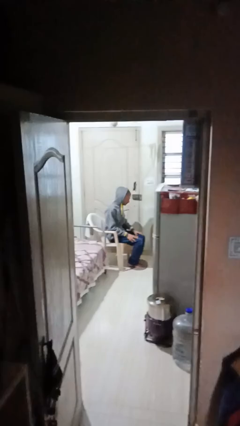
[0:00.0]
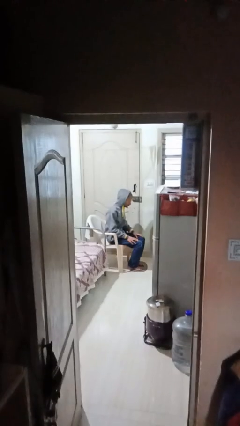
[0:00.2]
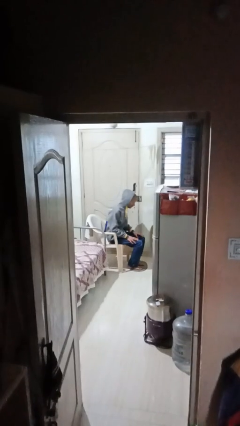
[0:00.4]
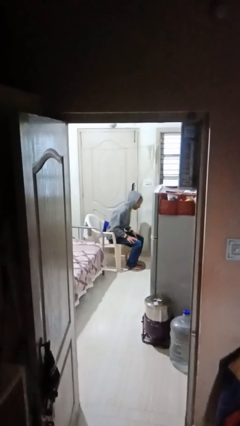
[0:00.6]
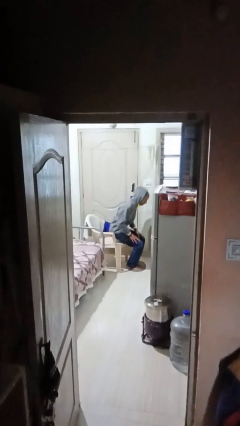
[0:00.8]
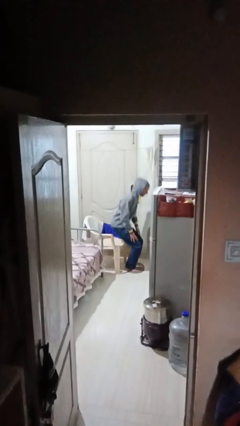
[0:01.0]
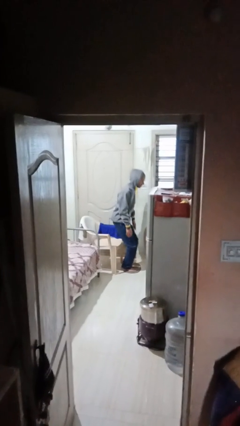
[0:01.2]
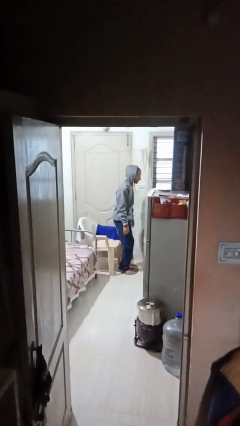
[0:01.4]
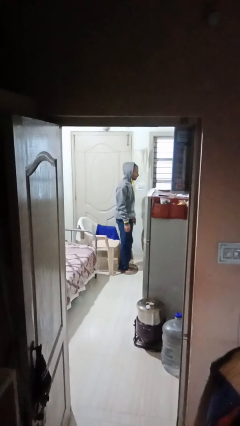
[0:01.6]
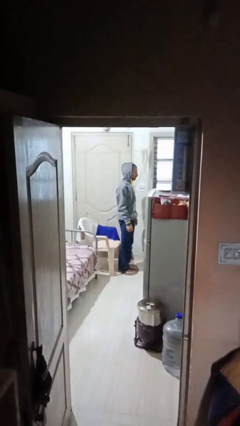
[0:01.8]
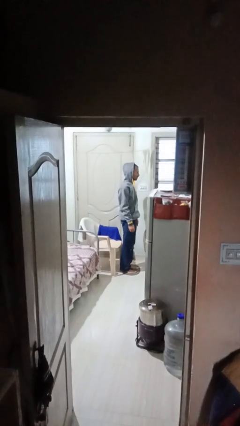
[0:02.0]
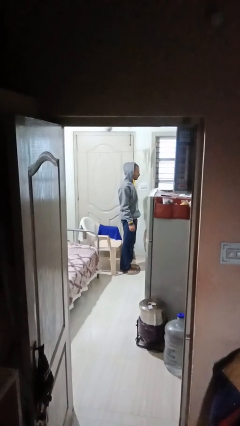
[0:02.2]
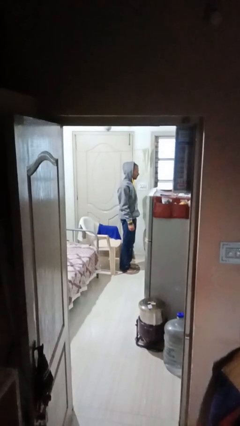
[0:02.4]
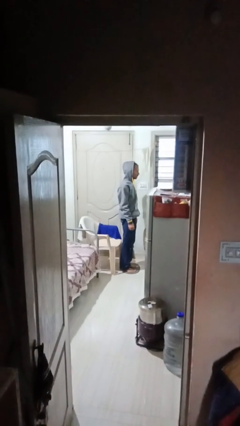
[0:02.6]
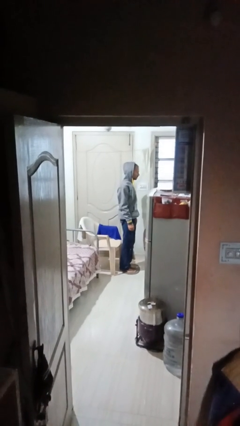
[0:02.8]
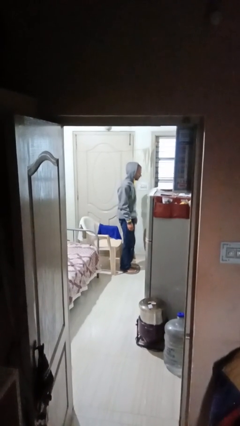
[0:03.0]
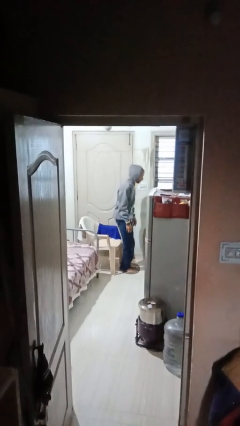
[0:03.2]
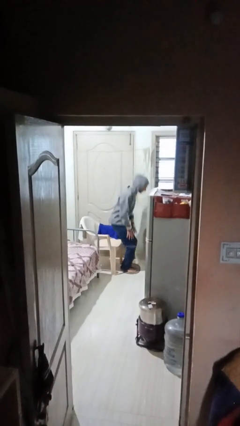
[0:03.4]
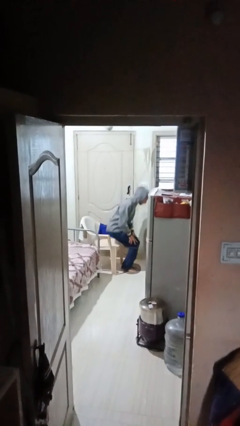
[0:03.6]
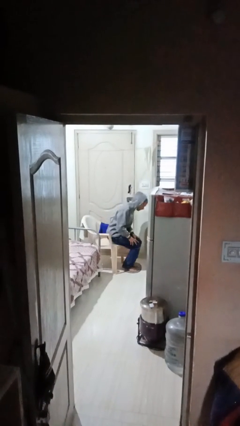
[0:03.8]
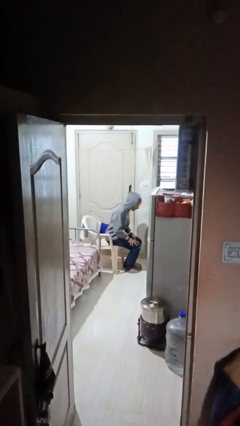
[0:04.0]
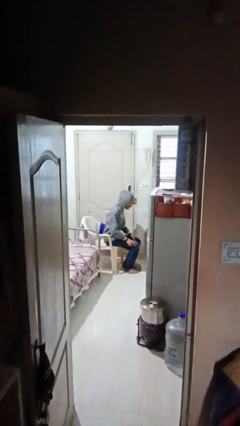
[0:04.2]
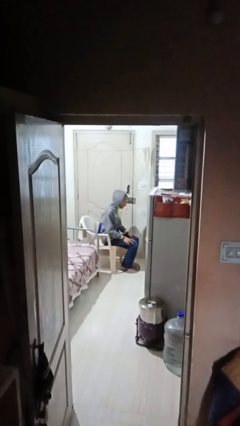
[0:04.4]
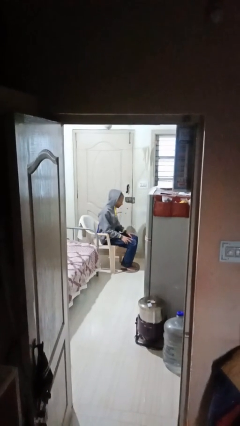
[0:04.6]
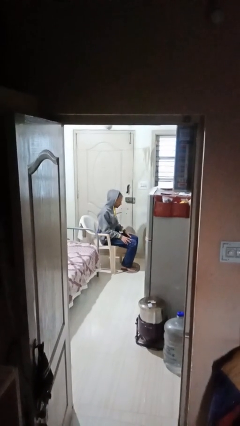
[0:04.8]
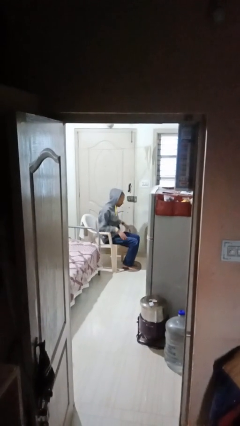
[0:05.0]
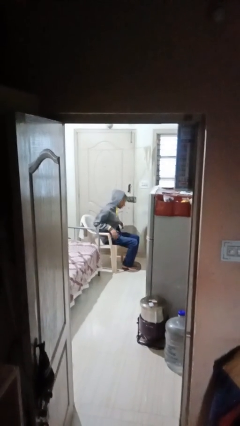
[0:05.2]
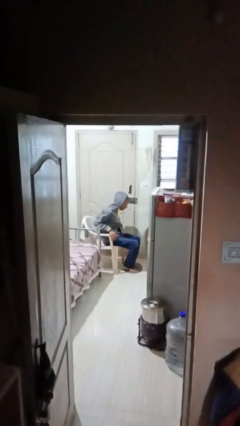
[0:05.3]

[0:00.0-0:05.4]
person stands up

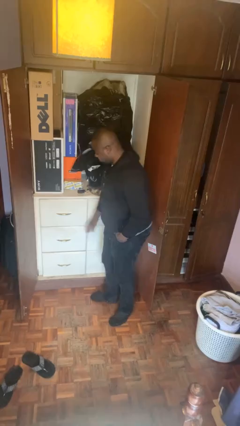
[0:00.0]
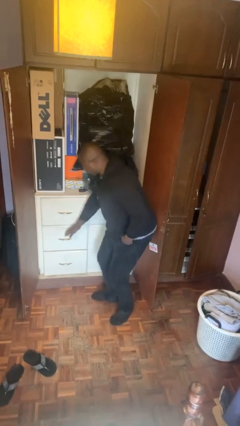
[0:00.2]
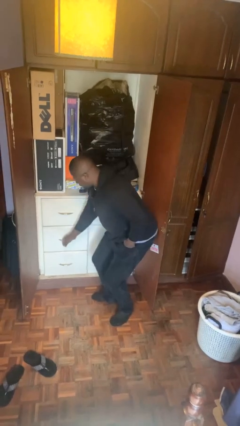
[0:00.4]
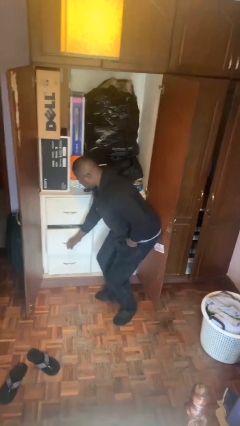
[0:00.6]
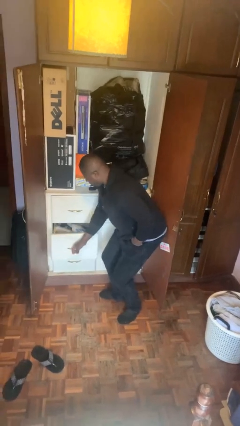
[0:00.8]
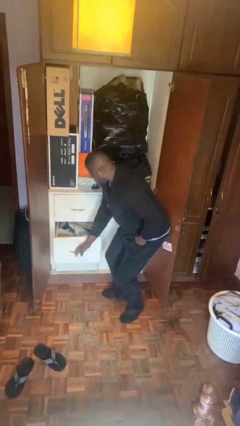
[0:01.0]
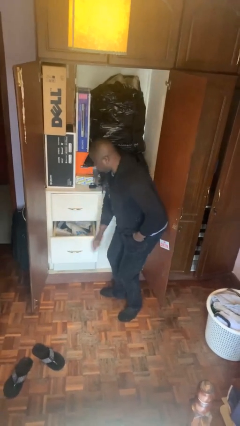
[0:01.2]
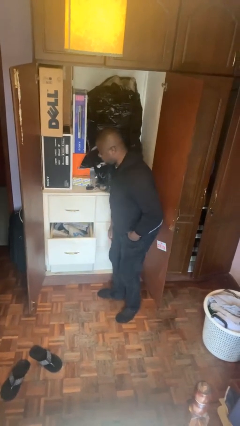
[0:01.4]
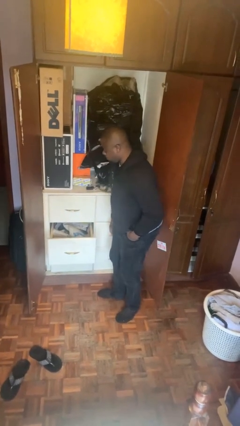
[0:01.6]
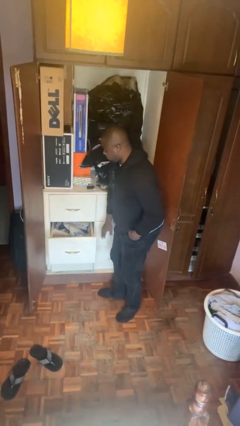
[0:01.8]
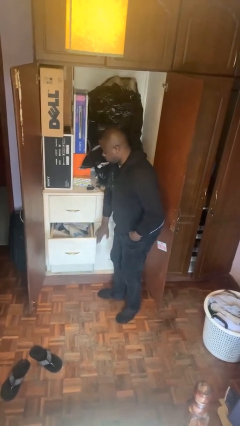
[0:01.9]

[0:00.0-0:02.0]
person opens dresser drawer

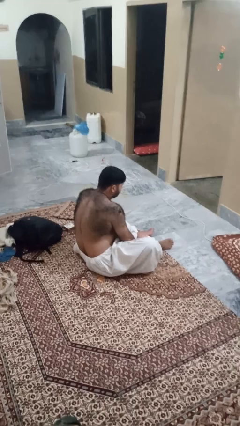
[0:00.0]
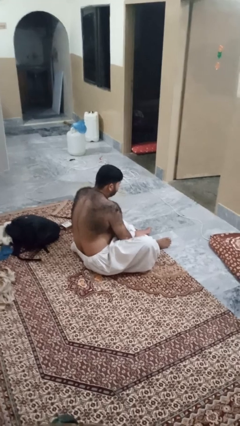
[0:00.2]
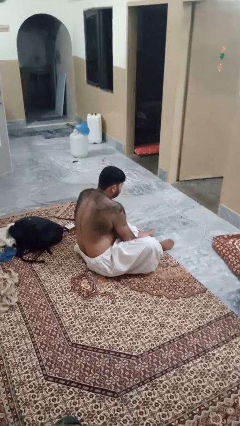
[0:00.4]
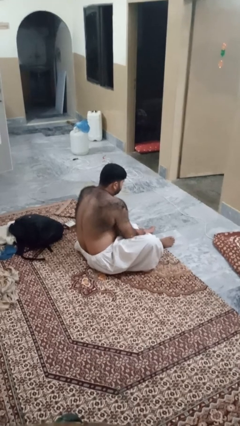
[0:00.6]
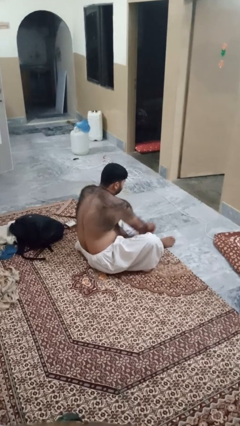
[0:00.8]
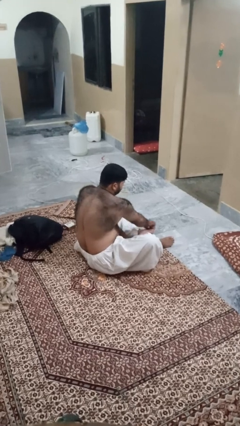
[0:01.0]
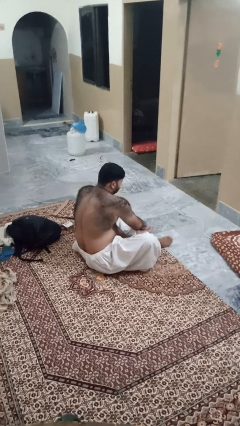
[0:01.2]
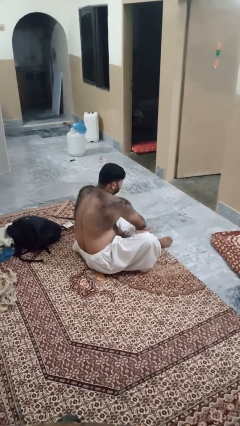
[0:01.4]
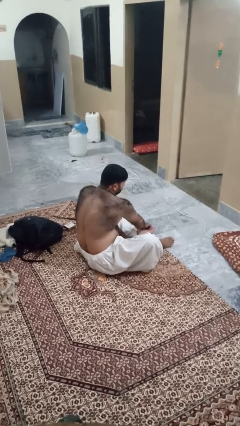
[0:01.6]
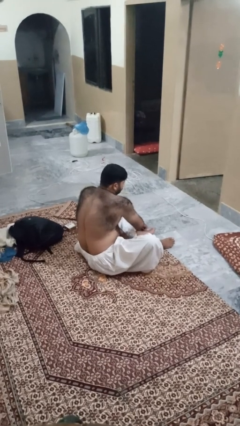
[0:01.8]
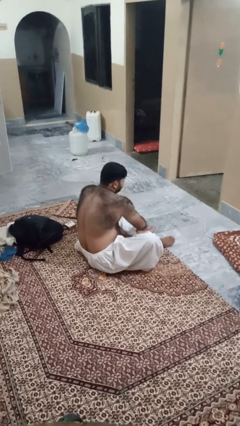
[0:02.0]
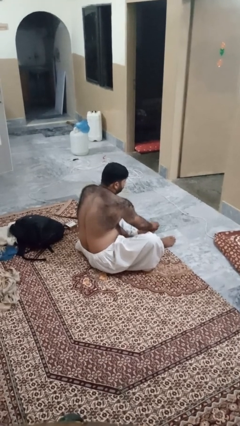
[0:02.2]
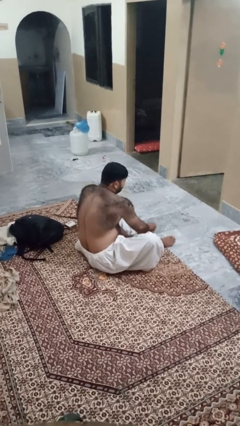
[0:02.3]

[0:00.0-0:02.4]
person rubs foot

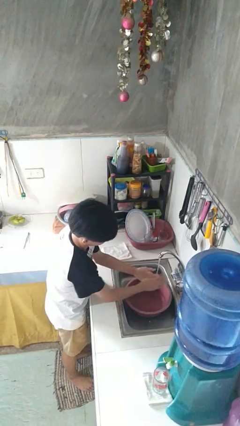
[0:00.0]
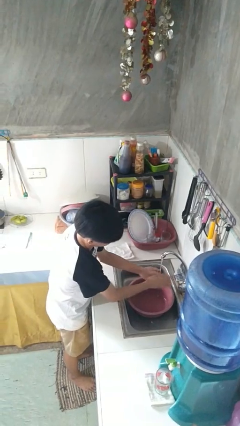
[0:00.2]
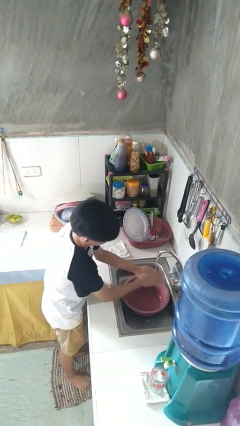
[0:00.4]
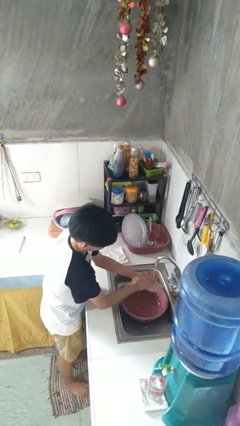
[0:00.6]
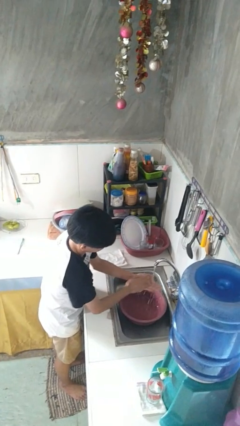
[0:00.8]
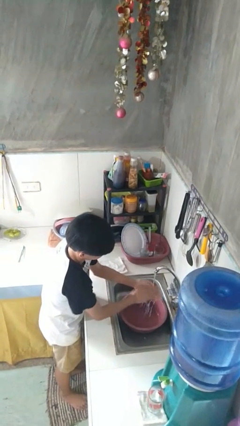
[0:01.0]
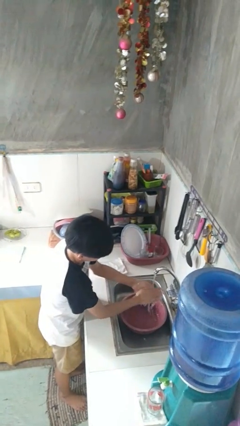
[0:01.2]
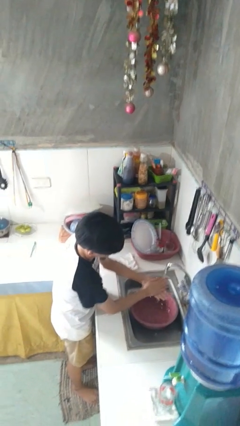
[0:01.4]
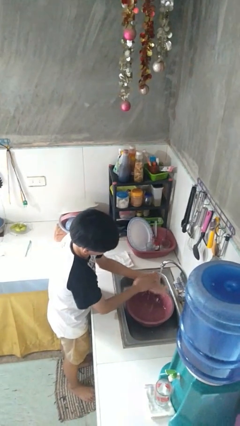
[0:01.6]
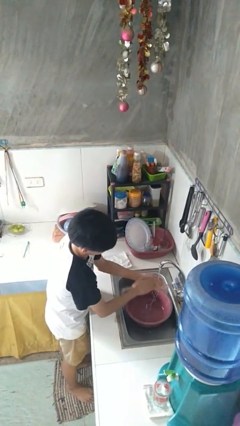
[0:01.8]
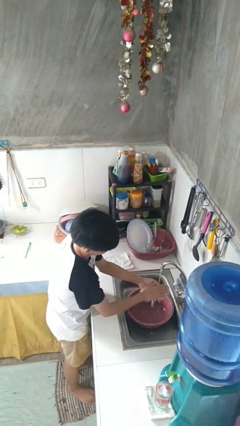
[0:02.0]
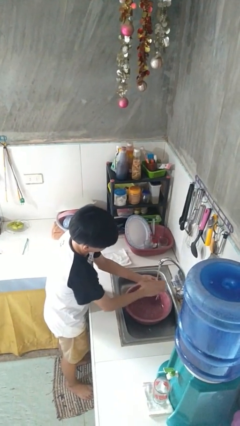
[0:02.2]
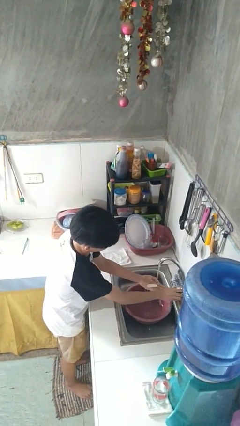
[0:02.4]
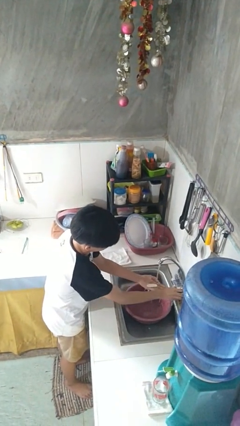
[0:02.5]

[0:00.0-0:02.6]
person washes hands

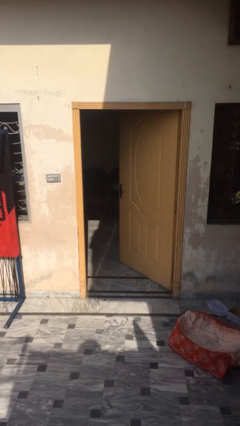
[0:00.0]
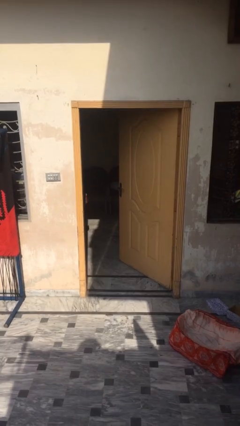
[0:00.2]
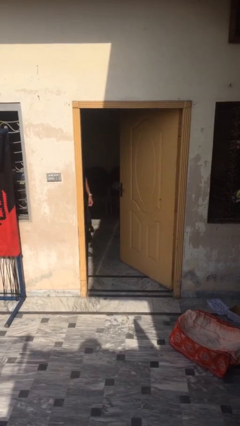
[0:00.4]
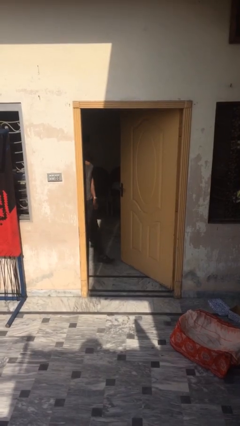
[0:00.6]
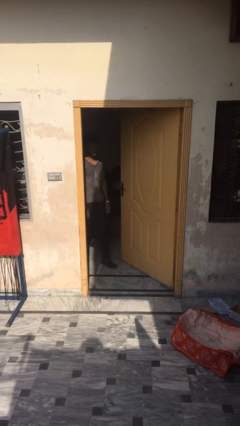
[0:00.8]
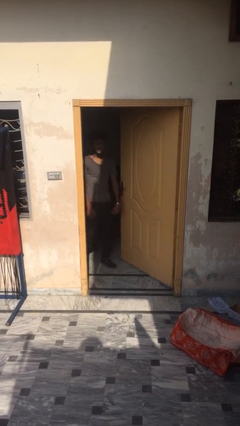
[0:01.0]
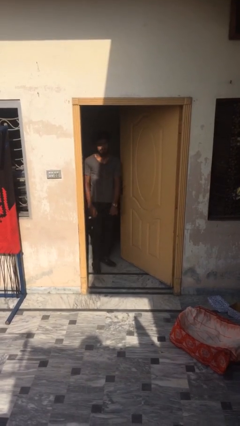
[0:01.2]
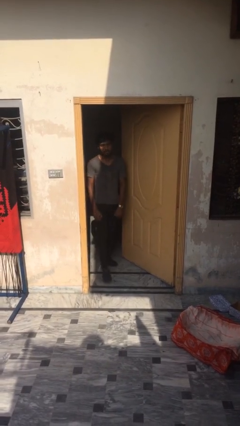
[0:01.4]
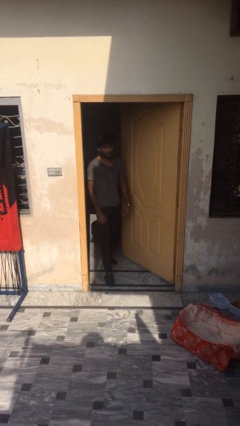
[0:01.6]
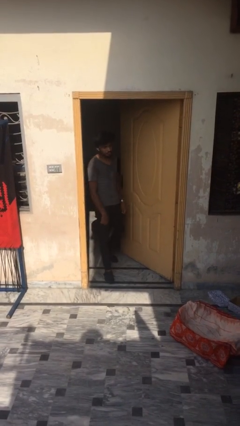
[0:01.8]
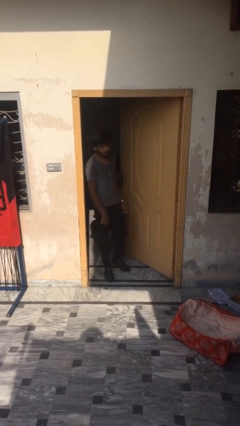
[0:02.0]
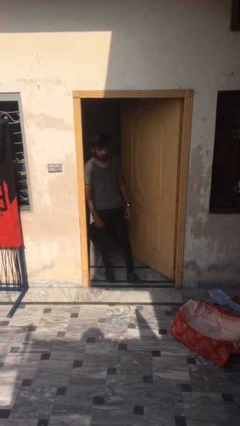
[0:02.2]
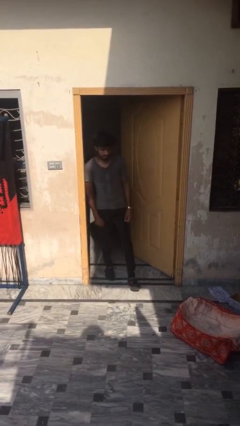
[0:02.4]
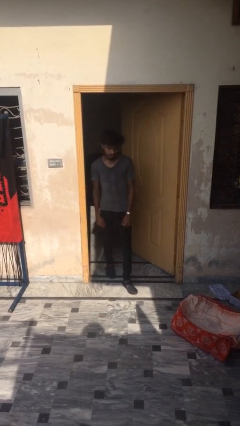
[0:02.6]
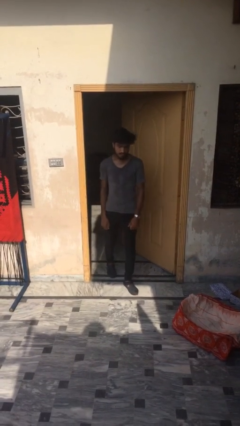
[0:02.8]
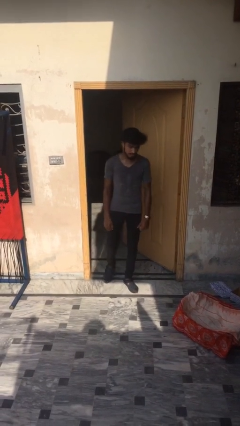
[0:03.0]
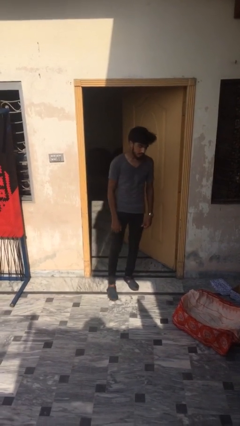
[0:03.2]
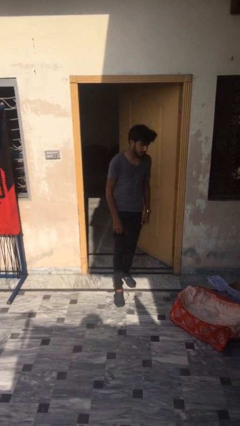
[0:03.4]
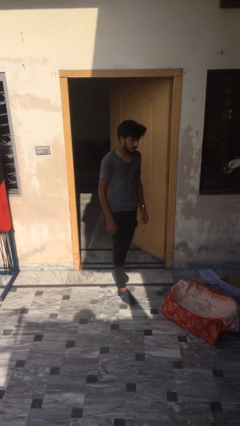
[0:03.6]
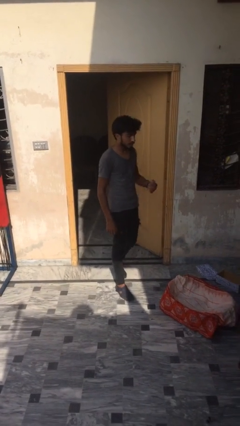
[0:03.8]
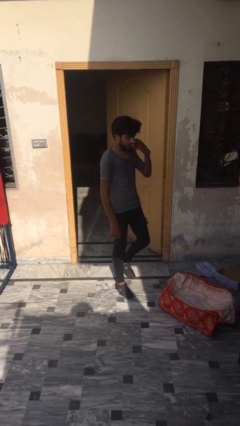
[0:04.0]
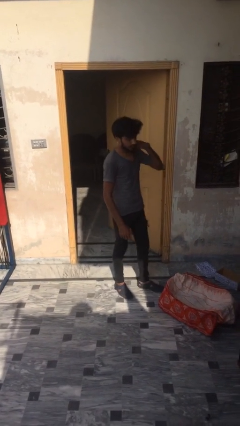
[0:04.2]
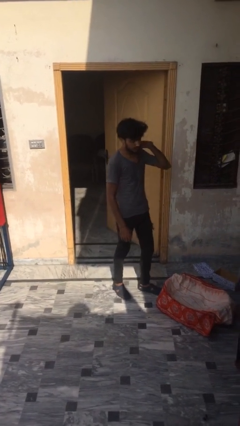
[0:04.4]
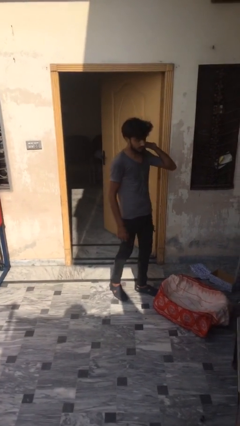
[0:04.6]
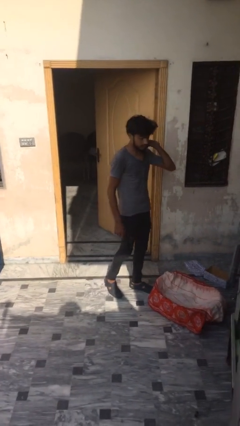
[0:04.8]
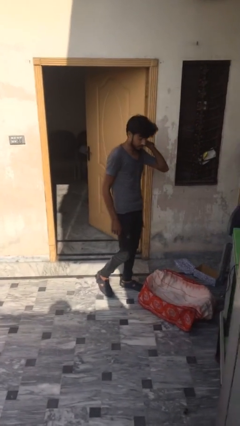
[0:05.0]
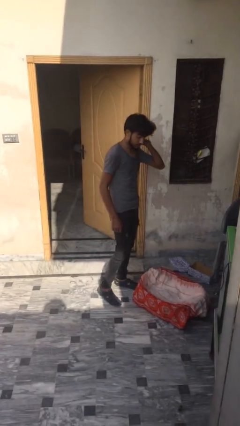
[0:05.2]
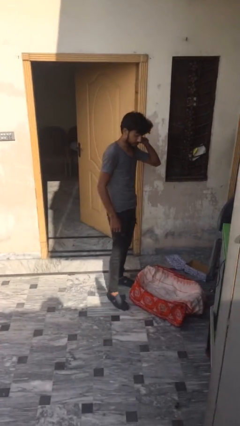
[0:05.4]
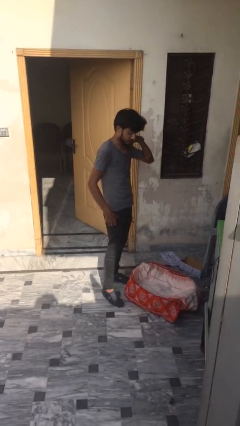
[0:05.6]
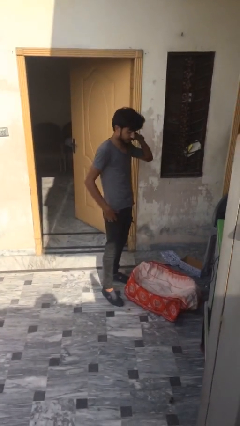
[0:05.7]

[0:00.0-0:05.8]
person enters scene through structure
